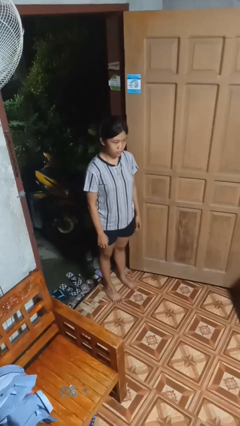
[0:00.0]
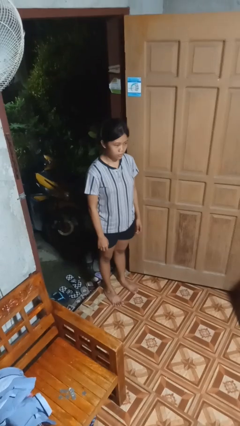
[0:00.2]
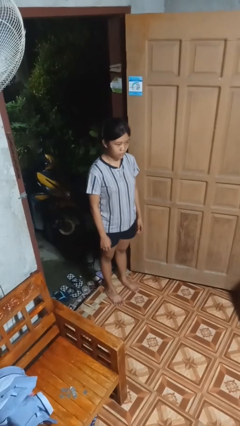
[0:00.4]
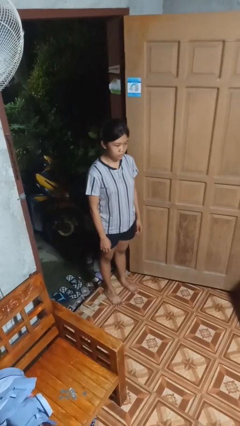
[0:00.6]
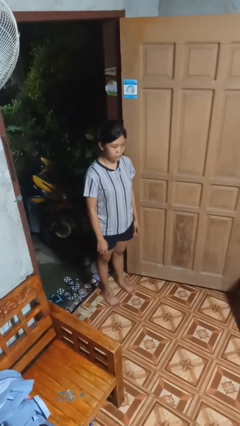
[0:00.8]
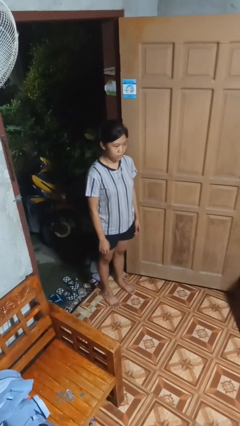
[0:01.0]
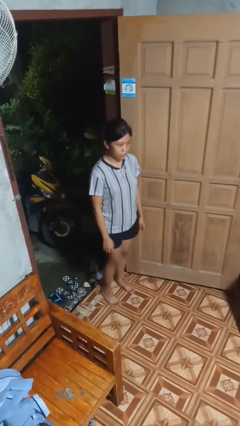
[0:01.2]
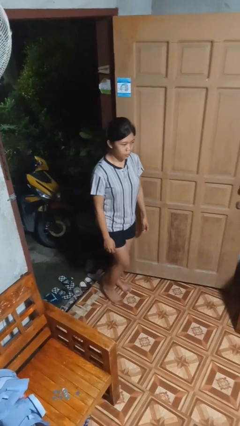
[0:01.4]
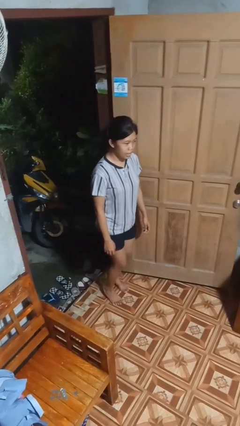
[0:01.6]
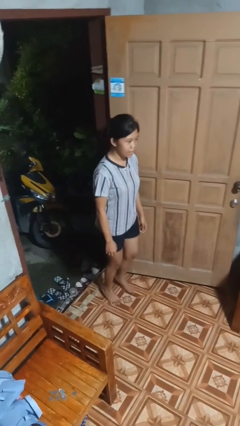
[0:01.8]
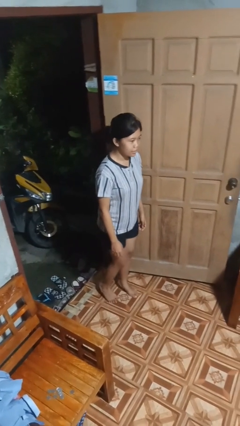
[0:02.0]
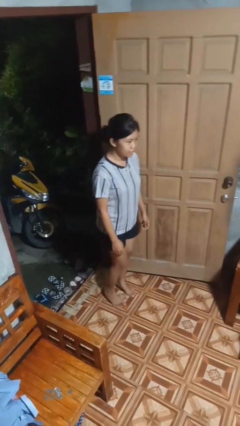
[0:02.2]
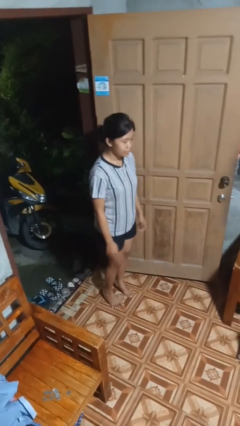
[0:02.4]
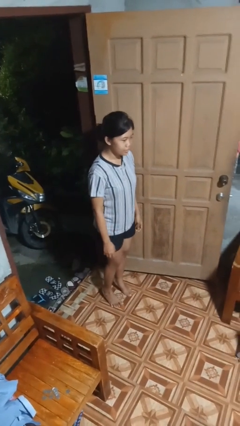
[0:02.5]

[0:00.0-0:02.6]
person walks tiptoe

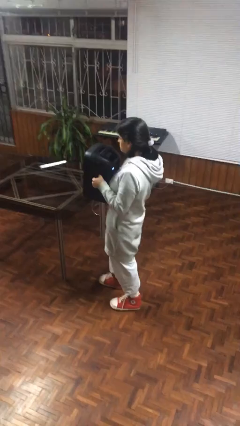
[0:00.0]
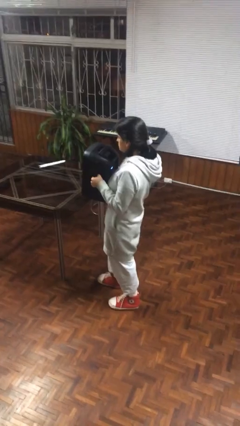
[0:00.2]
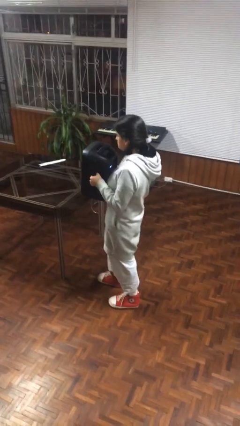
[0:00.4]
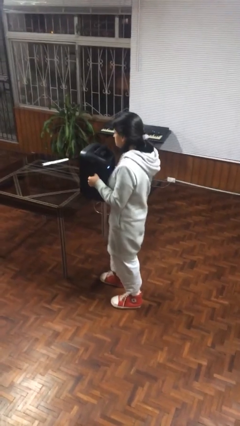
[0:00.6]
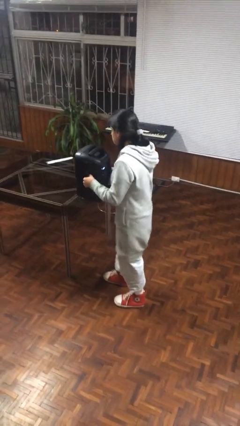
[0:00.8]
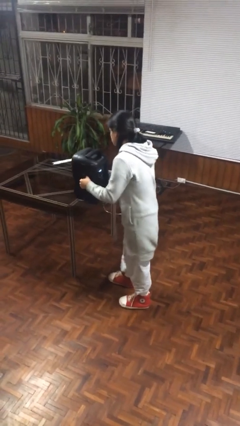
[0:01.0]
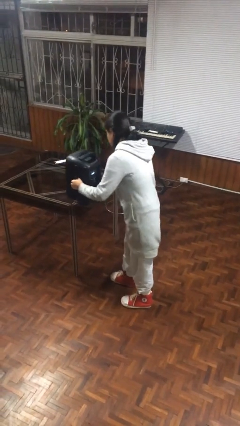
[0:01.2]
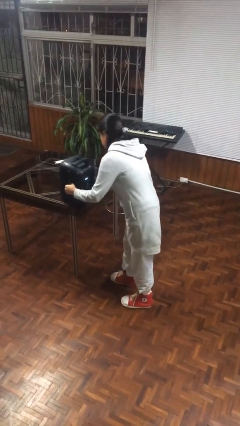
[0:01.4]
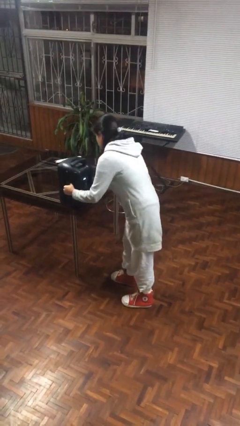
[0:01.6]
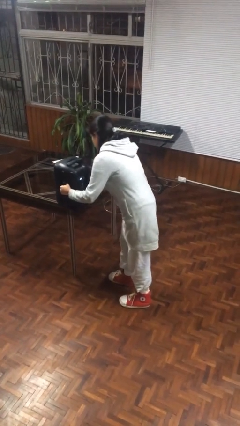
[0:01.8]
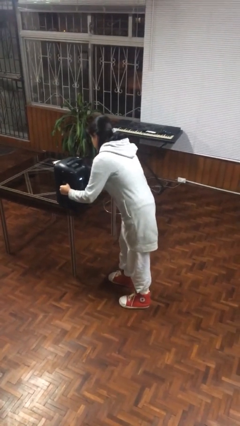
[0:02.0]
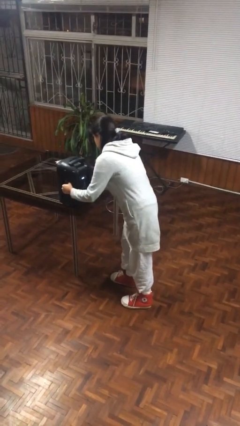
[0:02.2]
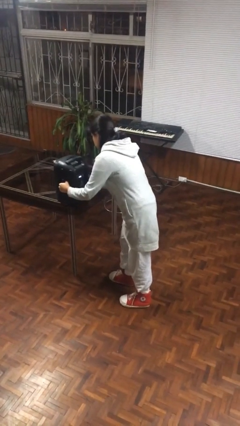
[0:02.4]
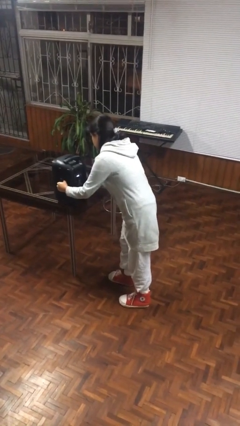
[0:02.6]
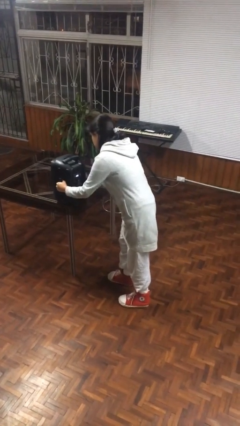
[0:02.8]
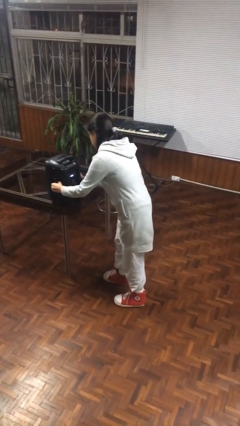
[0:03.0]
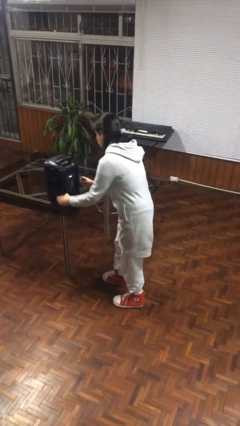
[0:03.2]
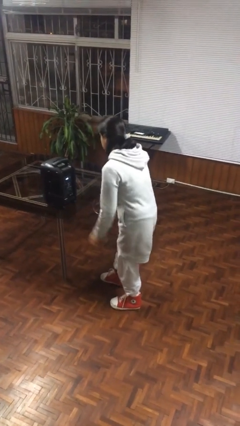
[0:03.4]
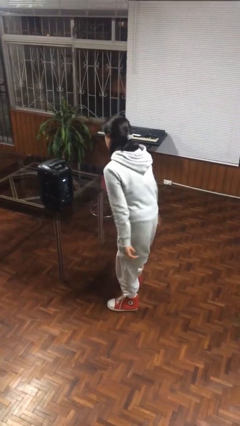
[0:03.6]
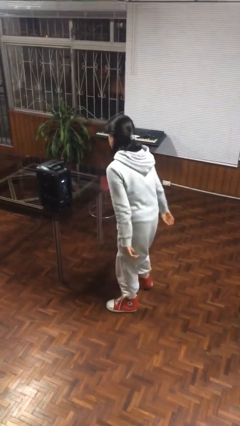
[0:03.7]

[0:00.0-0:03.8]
person puts down object on table

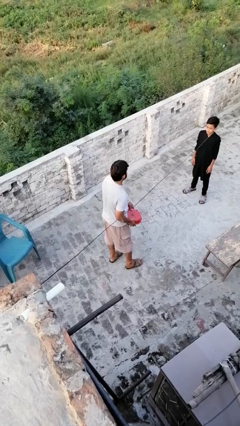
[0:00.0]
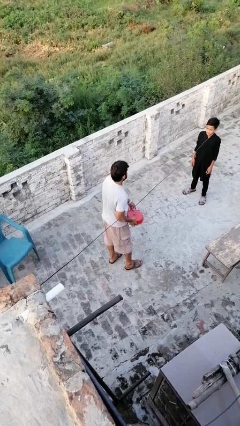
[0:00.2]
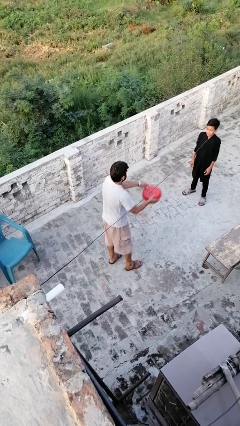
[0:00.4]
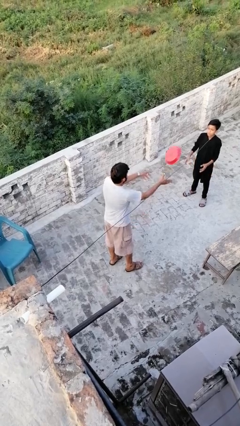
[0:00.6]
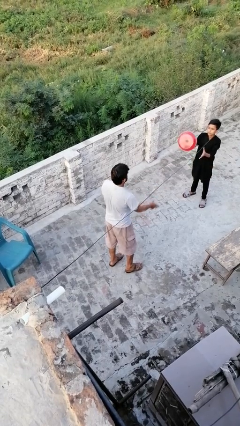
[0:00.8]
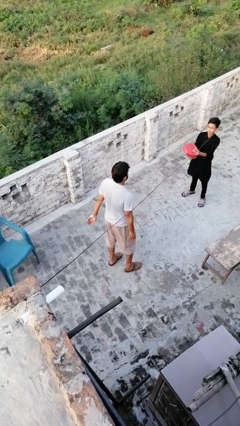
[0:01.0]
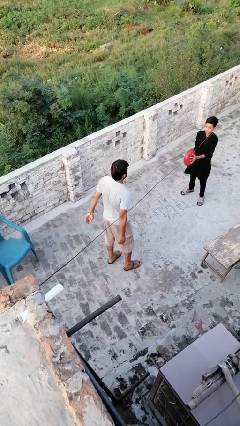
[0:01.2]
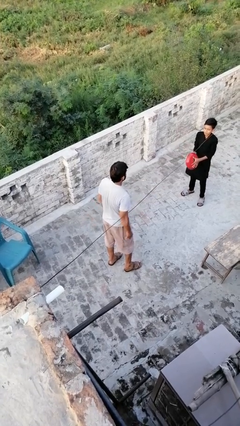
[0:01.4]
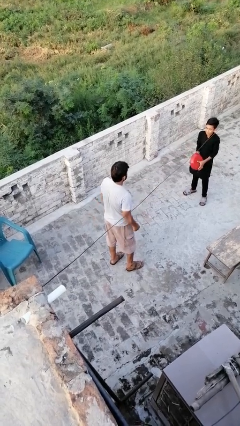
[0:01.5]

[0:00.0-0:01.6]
person throws object to person

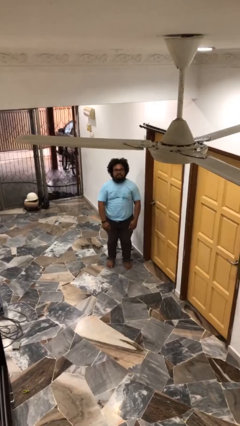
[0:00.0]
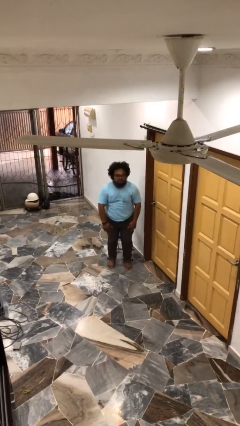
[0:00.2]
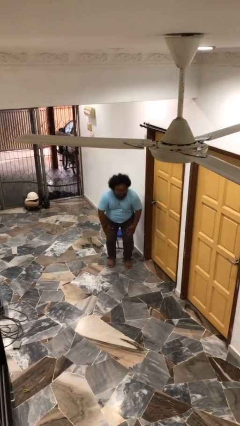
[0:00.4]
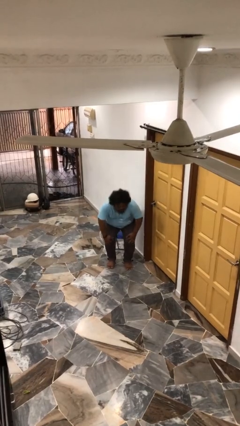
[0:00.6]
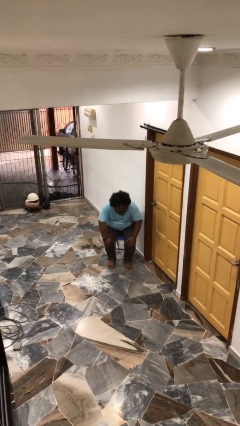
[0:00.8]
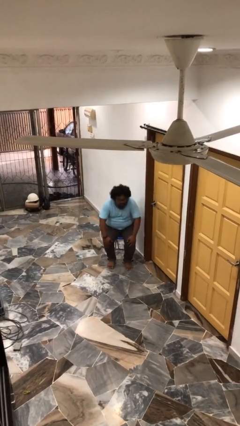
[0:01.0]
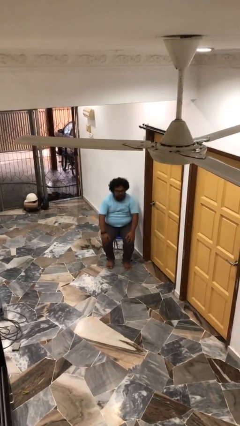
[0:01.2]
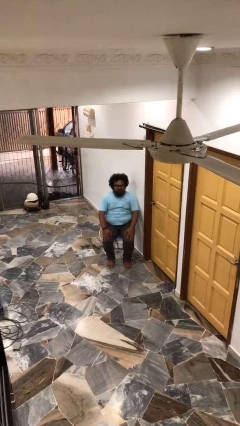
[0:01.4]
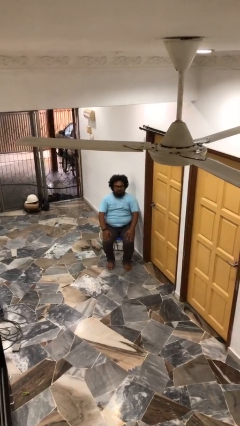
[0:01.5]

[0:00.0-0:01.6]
person sits down

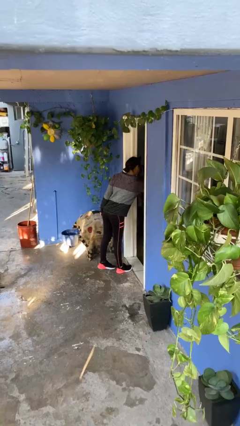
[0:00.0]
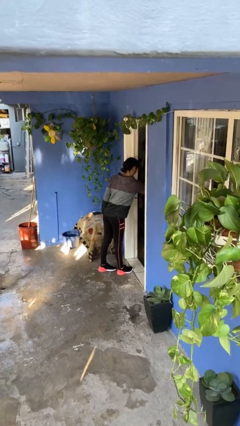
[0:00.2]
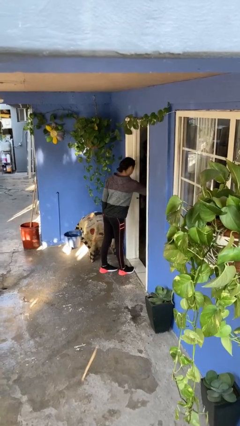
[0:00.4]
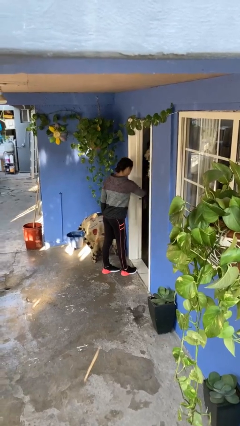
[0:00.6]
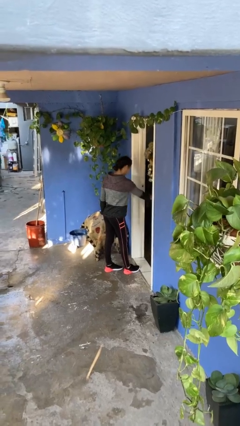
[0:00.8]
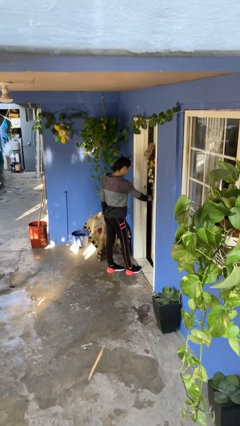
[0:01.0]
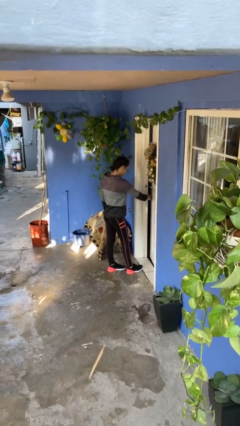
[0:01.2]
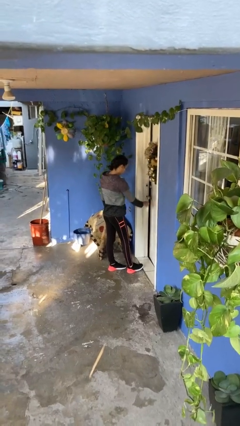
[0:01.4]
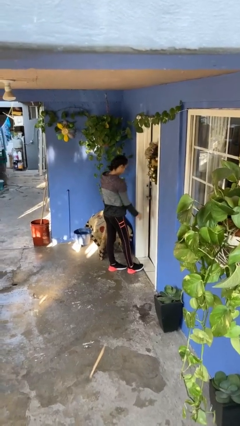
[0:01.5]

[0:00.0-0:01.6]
person closes facility door

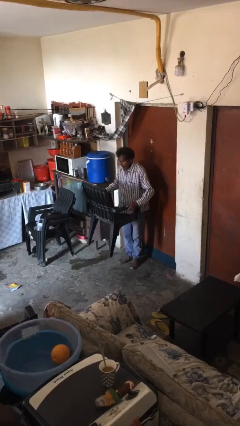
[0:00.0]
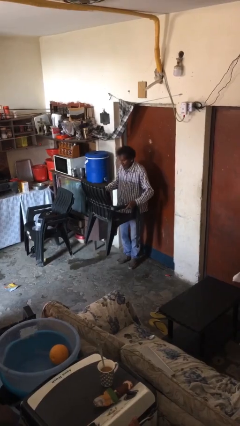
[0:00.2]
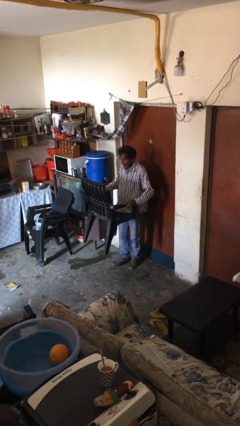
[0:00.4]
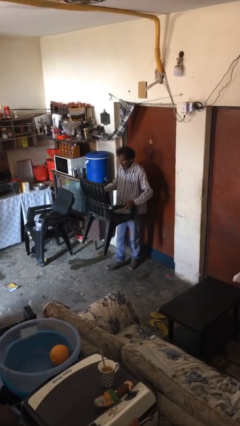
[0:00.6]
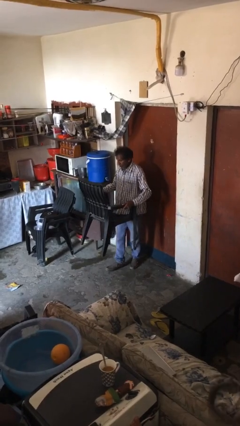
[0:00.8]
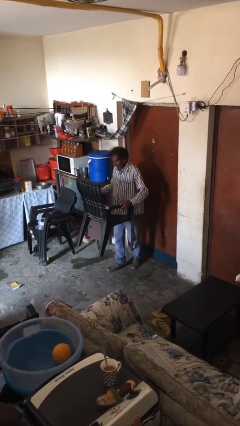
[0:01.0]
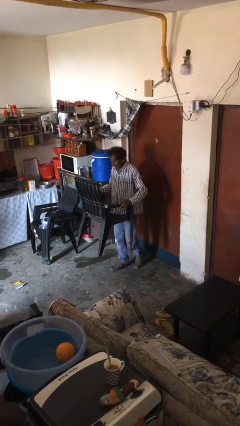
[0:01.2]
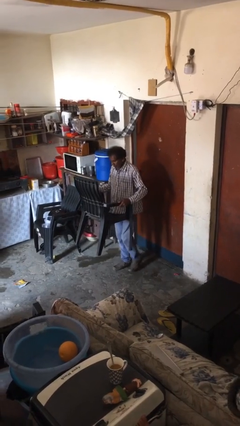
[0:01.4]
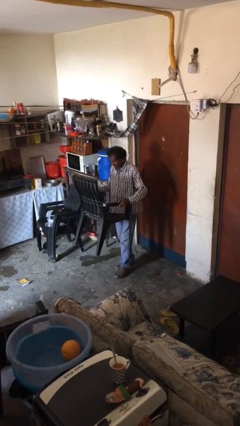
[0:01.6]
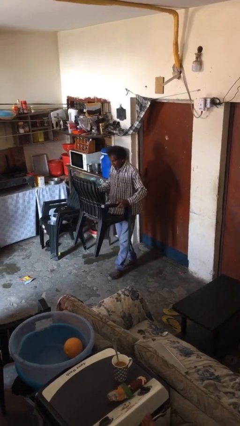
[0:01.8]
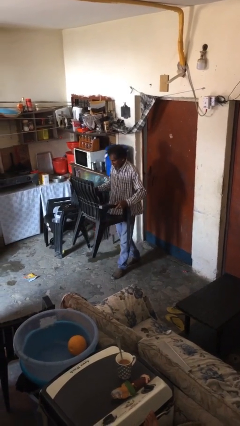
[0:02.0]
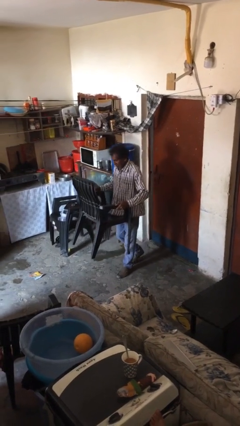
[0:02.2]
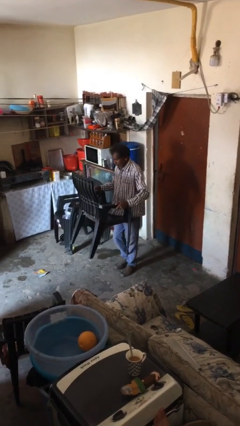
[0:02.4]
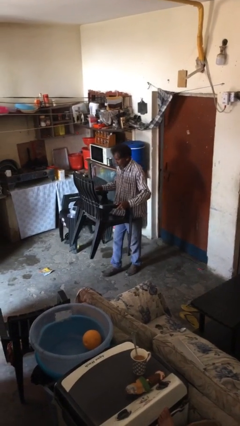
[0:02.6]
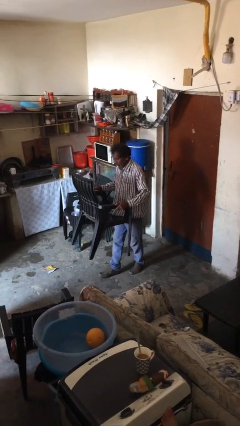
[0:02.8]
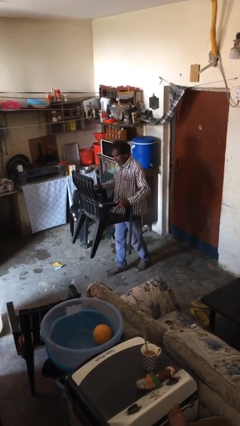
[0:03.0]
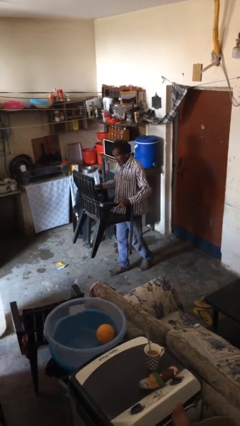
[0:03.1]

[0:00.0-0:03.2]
person carries heavy object

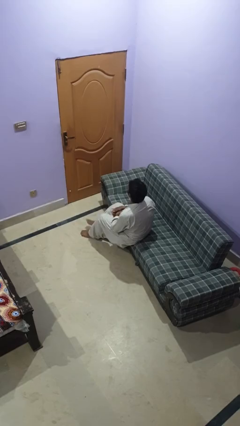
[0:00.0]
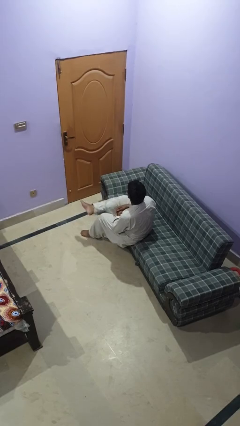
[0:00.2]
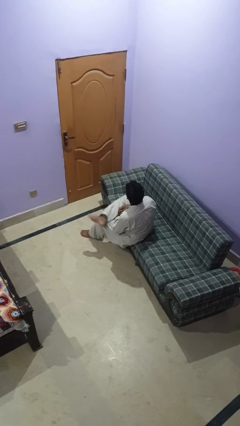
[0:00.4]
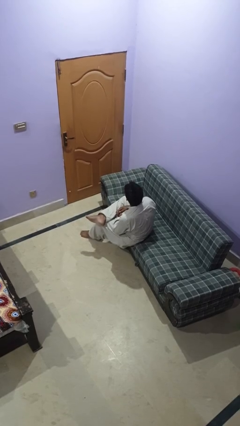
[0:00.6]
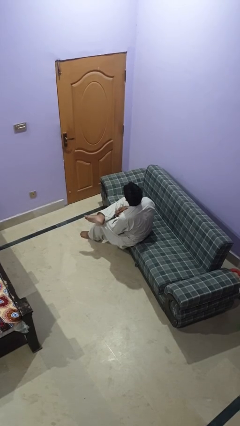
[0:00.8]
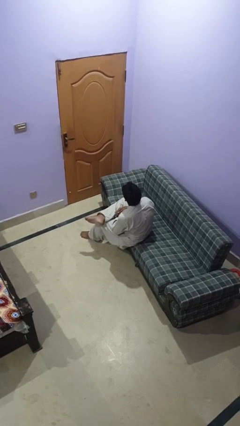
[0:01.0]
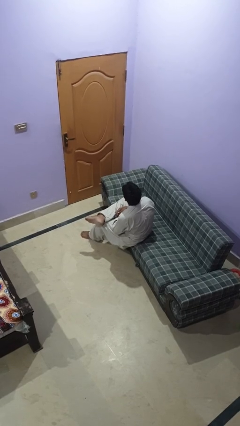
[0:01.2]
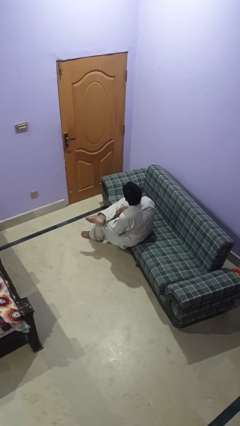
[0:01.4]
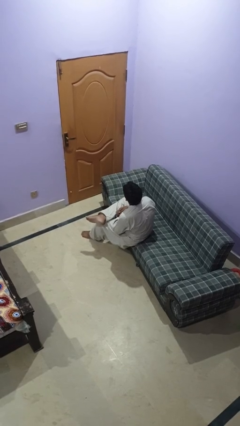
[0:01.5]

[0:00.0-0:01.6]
person crosses legs

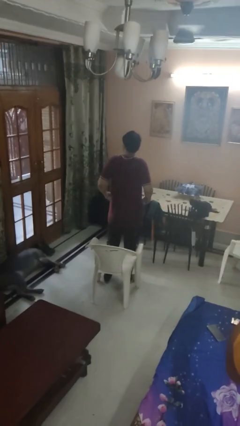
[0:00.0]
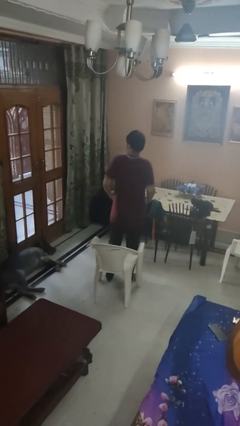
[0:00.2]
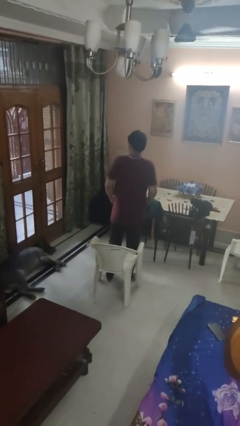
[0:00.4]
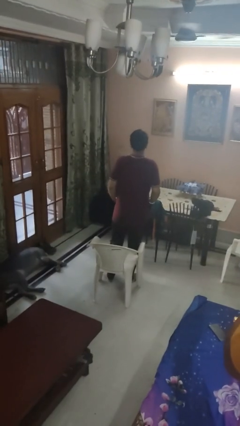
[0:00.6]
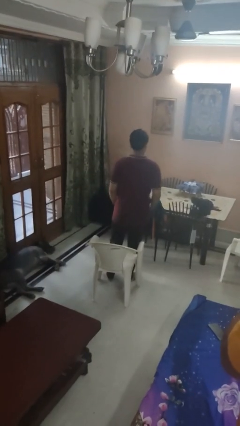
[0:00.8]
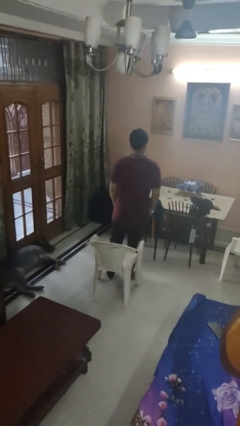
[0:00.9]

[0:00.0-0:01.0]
person shrugs
